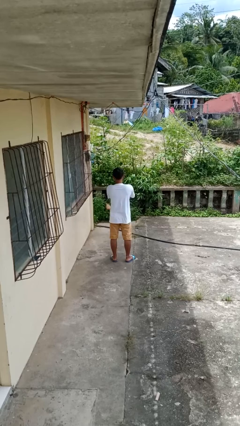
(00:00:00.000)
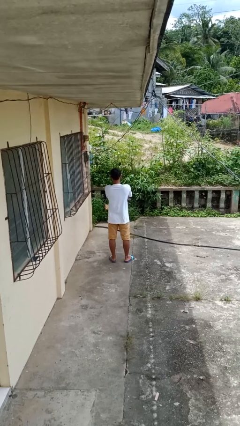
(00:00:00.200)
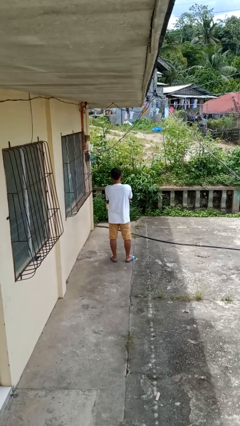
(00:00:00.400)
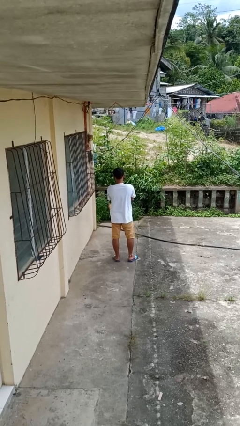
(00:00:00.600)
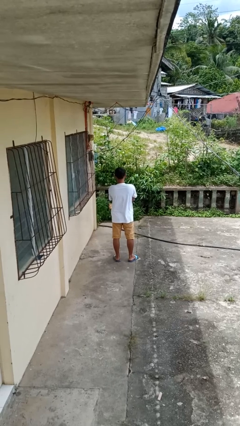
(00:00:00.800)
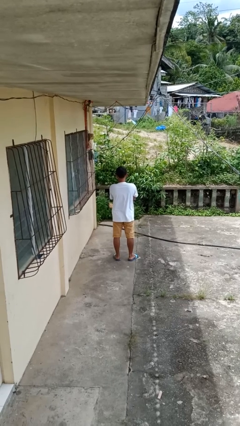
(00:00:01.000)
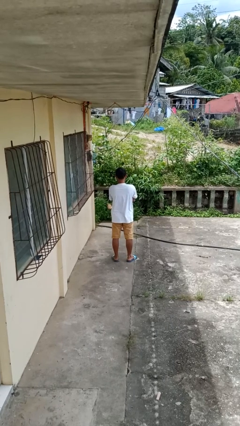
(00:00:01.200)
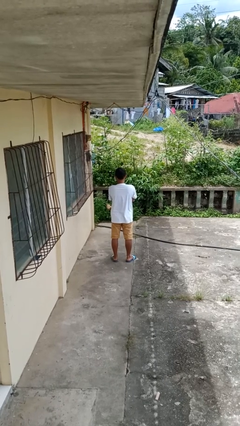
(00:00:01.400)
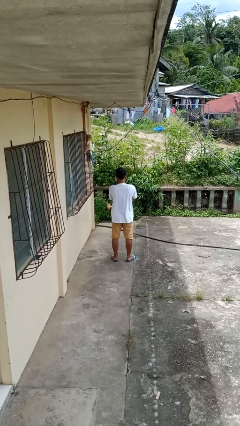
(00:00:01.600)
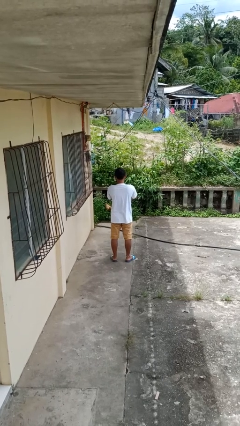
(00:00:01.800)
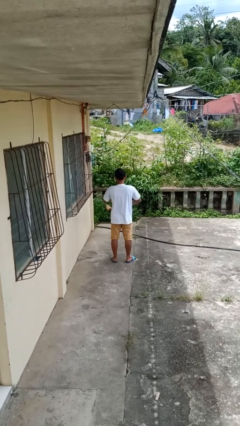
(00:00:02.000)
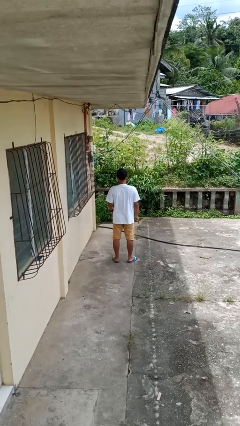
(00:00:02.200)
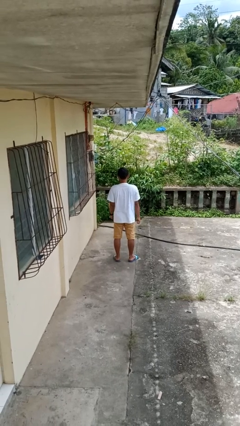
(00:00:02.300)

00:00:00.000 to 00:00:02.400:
person crosses arms

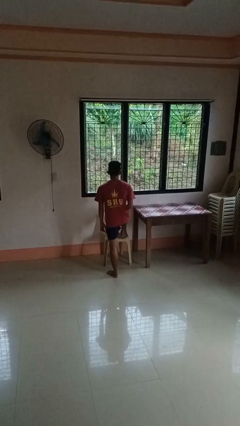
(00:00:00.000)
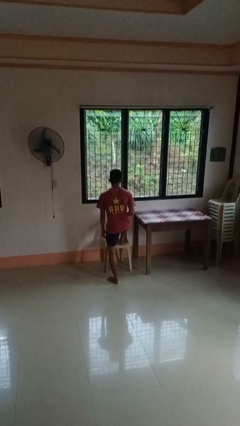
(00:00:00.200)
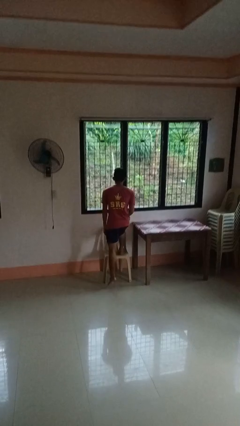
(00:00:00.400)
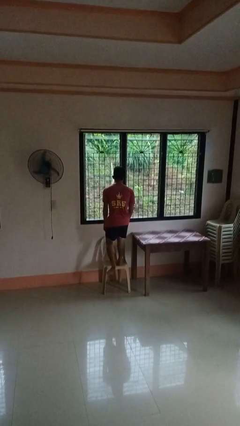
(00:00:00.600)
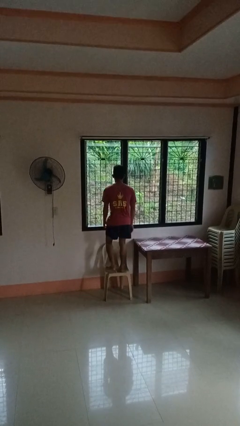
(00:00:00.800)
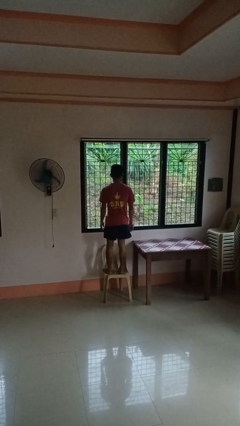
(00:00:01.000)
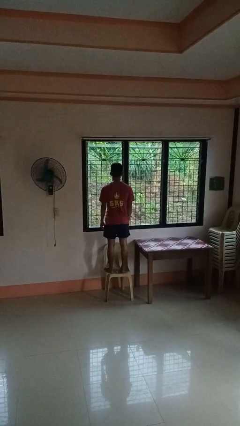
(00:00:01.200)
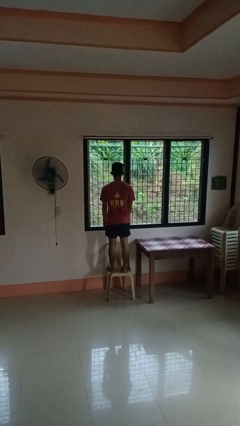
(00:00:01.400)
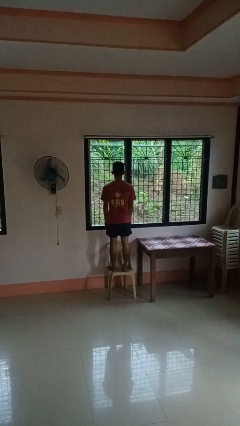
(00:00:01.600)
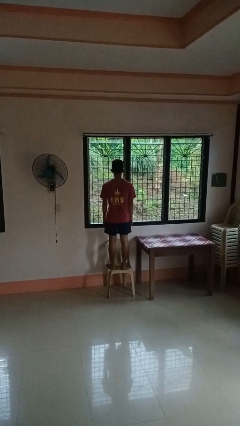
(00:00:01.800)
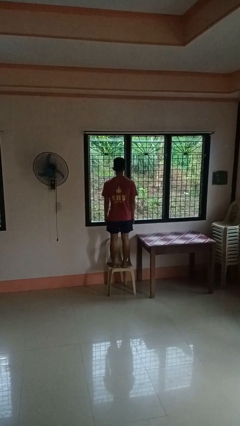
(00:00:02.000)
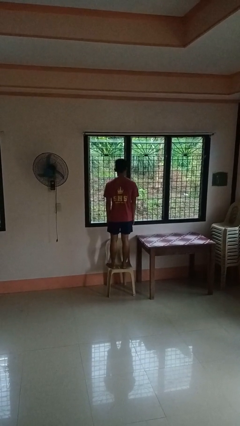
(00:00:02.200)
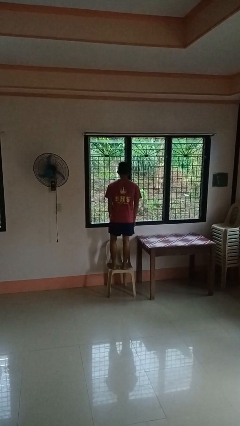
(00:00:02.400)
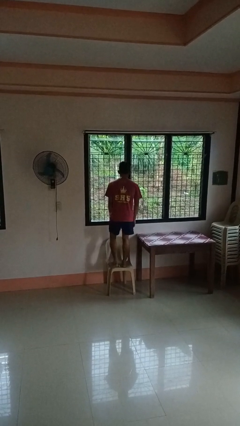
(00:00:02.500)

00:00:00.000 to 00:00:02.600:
person climbs on chair

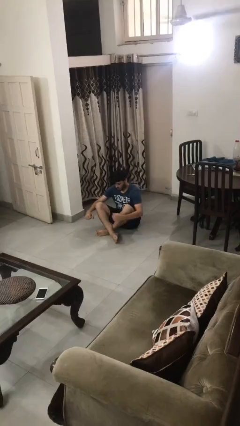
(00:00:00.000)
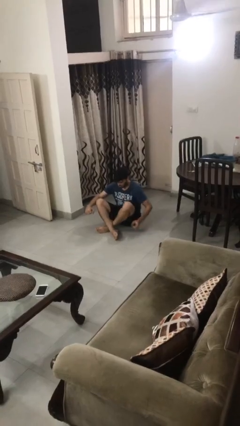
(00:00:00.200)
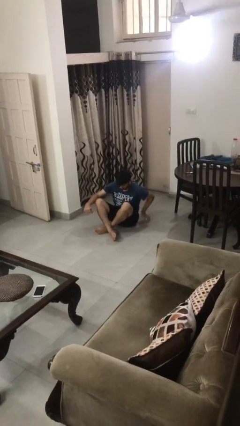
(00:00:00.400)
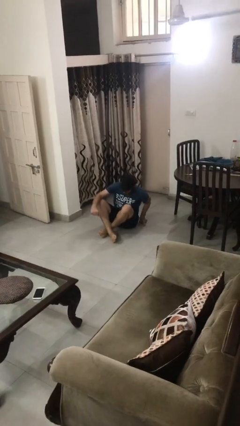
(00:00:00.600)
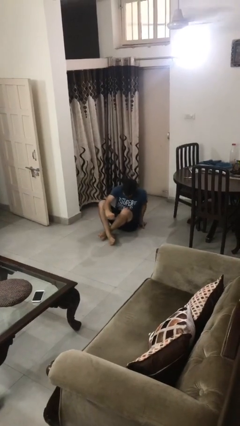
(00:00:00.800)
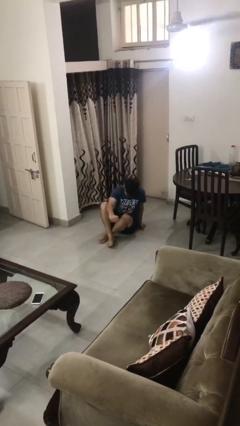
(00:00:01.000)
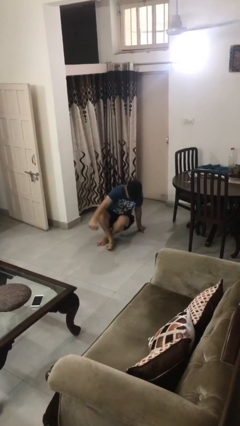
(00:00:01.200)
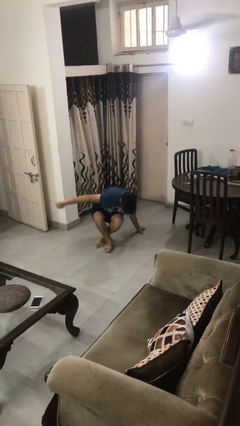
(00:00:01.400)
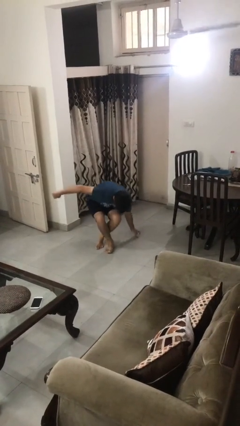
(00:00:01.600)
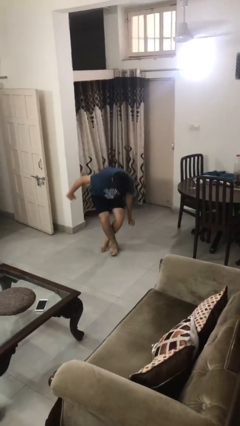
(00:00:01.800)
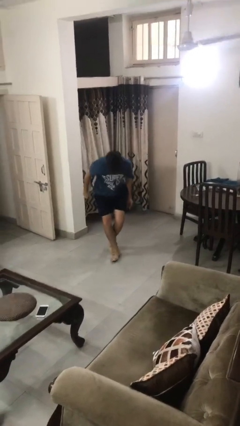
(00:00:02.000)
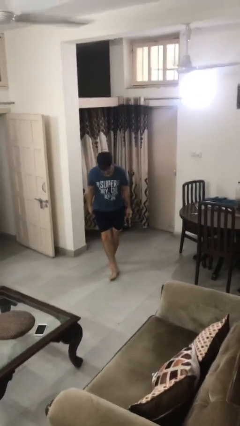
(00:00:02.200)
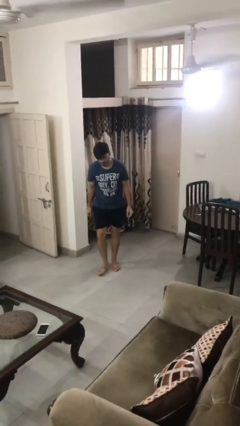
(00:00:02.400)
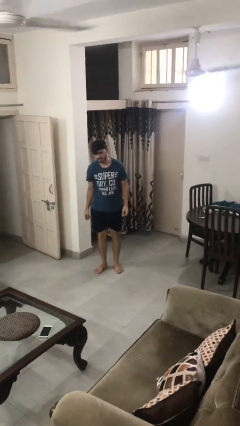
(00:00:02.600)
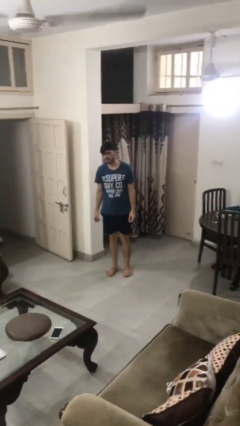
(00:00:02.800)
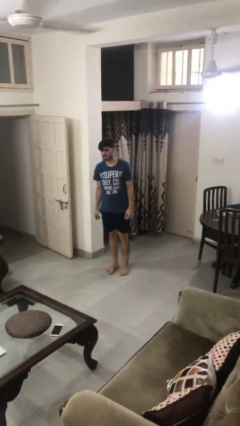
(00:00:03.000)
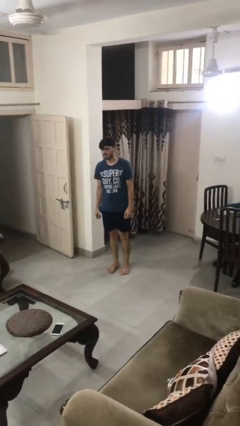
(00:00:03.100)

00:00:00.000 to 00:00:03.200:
person stands up from floor

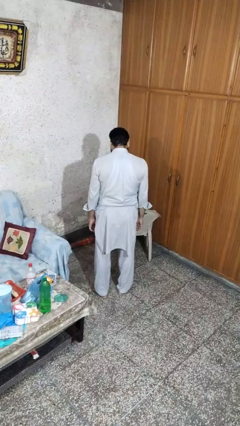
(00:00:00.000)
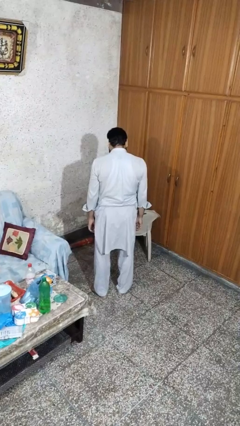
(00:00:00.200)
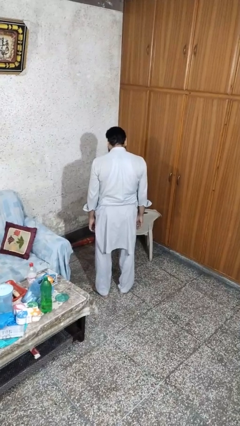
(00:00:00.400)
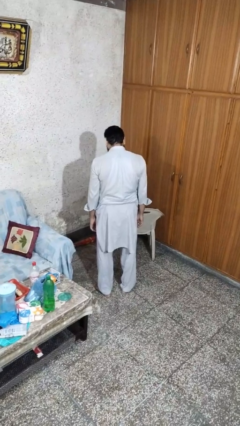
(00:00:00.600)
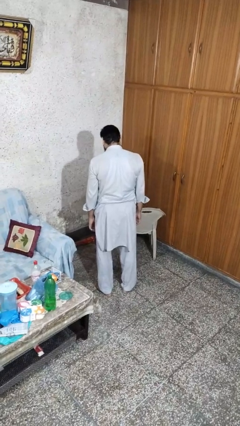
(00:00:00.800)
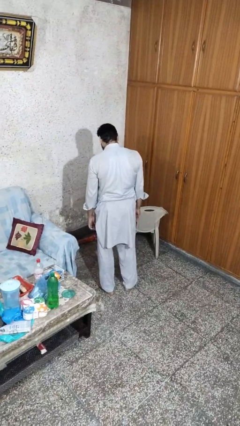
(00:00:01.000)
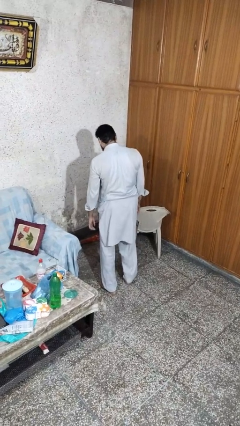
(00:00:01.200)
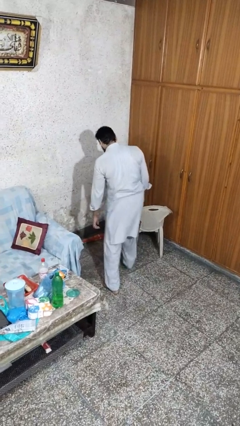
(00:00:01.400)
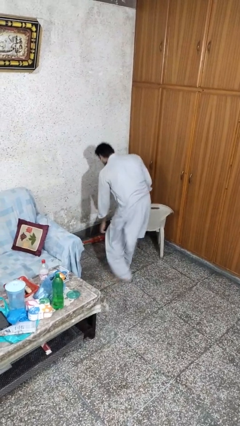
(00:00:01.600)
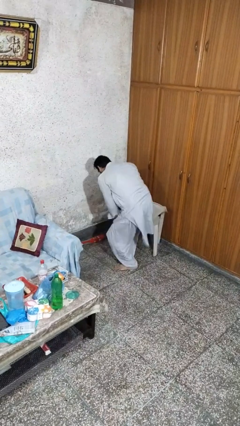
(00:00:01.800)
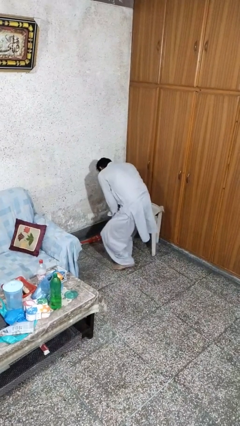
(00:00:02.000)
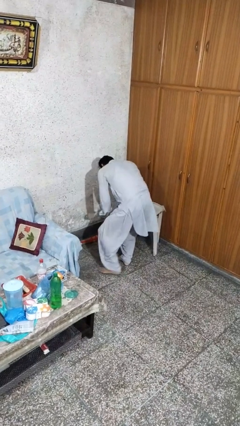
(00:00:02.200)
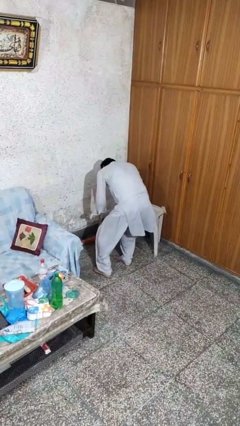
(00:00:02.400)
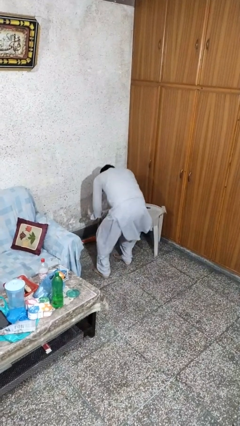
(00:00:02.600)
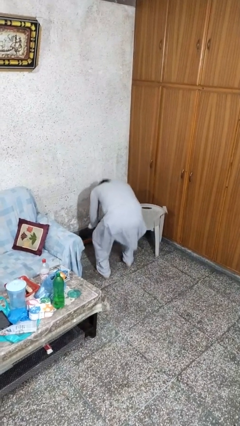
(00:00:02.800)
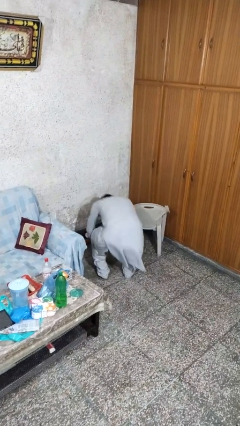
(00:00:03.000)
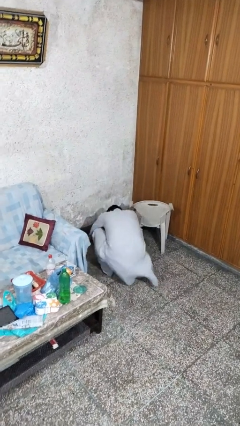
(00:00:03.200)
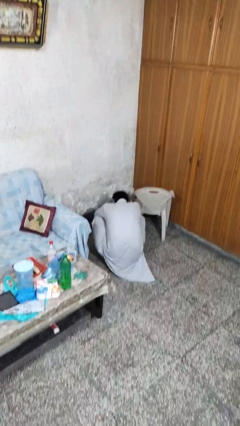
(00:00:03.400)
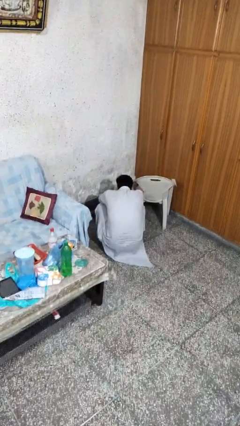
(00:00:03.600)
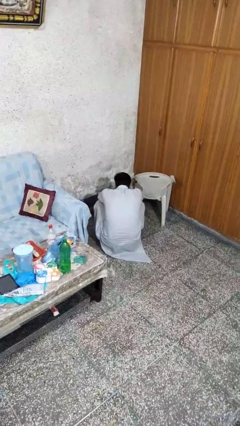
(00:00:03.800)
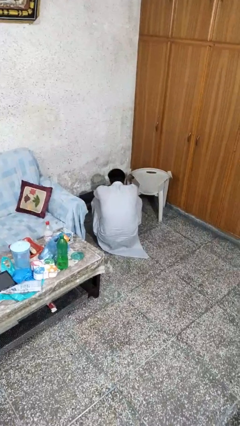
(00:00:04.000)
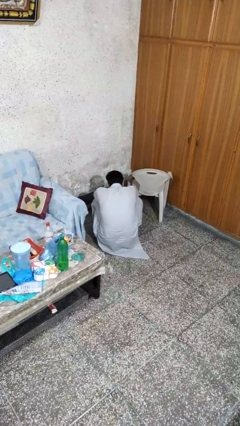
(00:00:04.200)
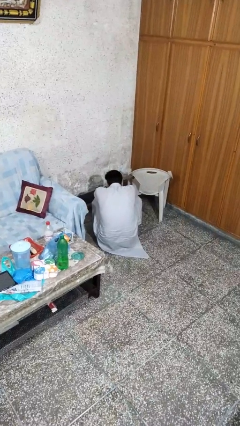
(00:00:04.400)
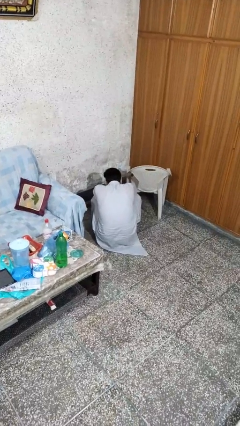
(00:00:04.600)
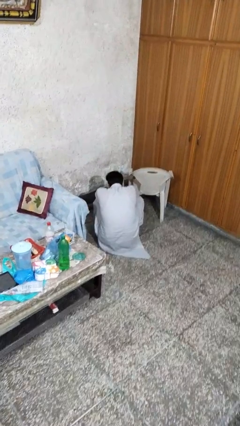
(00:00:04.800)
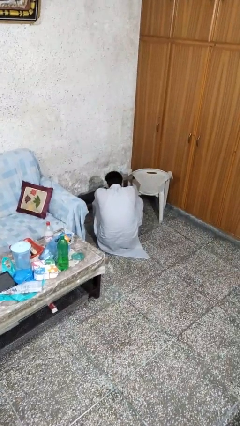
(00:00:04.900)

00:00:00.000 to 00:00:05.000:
person trips on object on floor

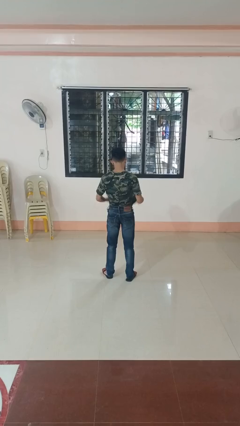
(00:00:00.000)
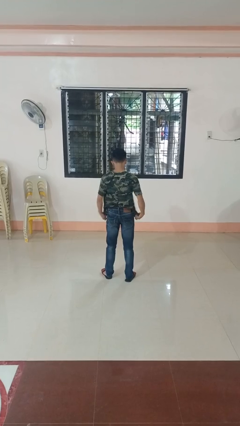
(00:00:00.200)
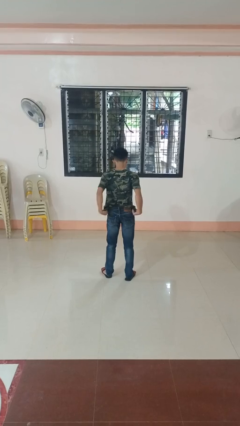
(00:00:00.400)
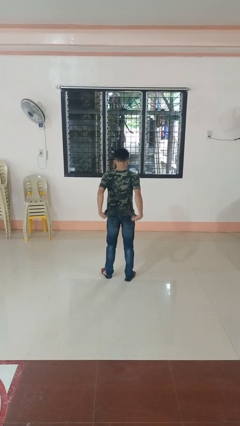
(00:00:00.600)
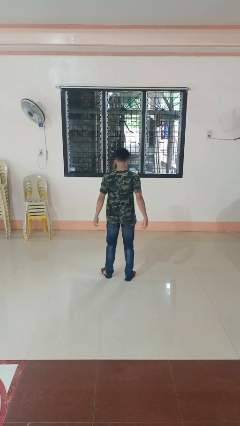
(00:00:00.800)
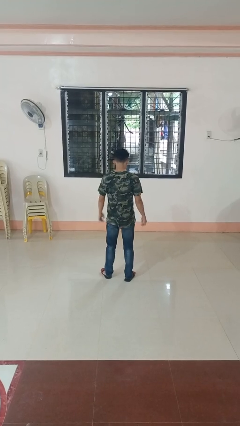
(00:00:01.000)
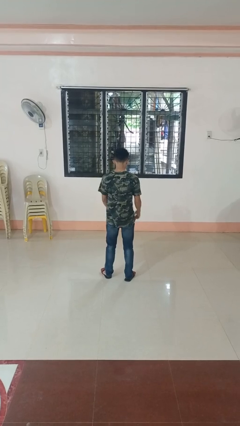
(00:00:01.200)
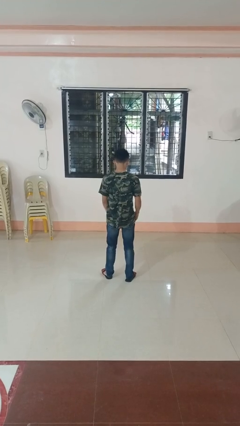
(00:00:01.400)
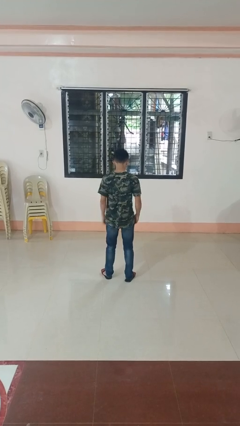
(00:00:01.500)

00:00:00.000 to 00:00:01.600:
person untucks shirt

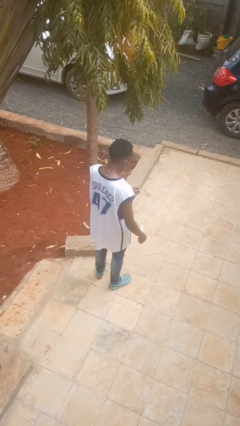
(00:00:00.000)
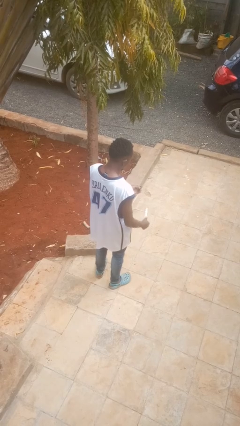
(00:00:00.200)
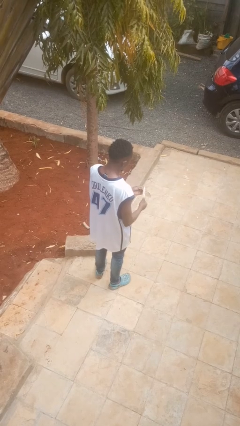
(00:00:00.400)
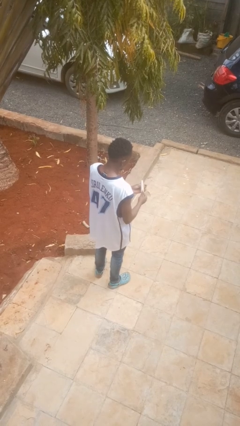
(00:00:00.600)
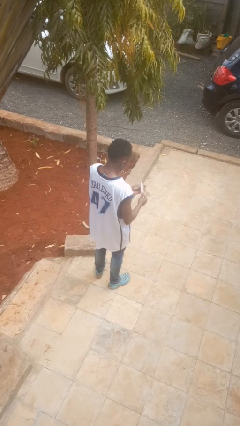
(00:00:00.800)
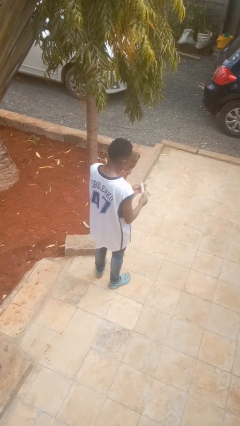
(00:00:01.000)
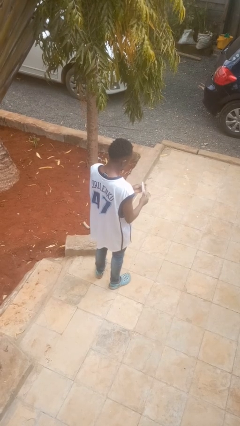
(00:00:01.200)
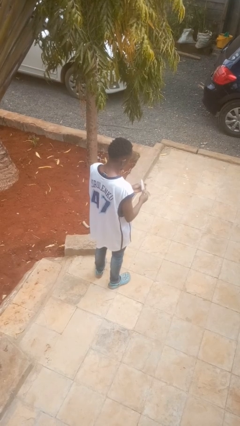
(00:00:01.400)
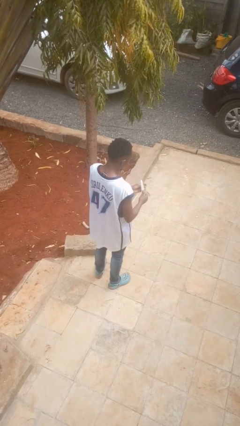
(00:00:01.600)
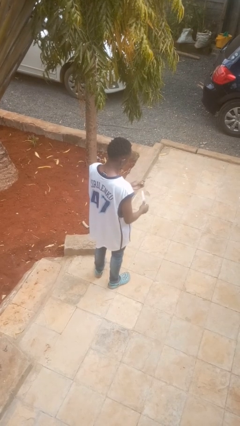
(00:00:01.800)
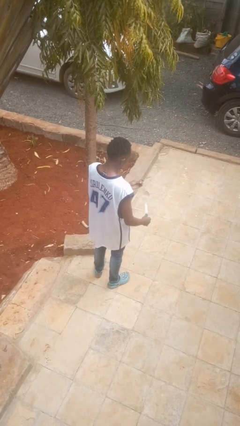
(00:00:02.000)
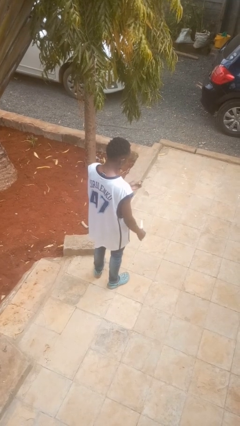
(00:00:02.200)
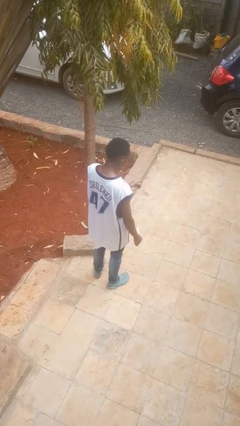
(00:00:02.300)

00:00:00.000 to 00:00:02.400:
person files fingernails

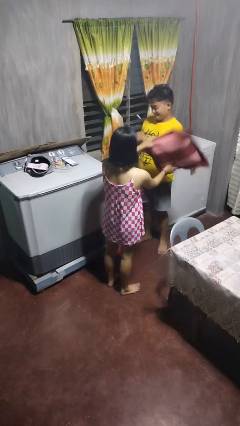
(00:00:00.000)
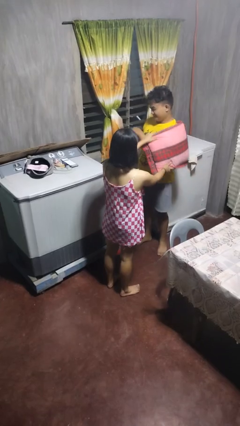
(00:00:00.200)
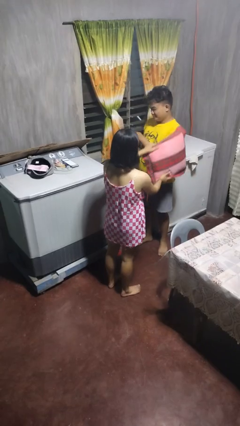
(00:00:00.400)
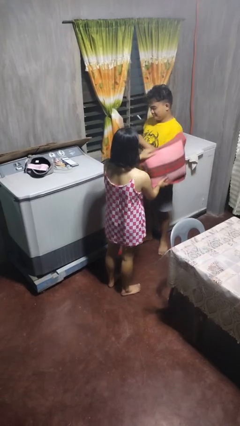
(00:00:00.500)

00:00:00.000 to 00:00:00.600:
person hits person with pillow
